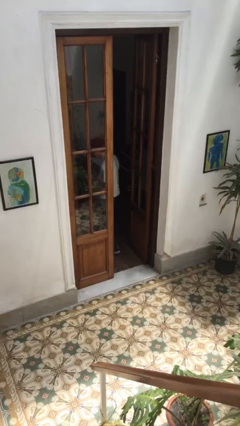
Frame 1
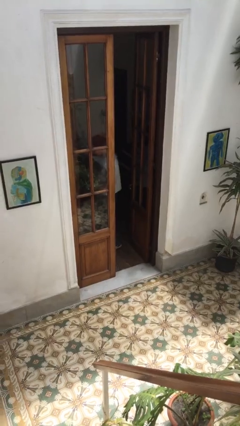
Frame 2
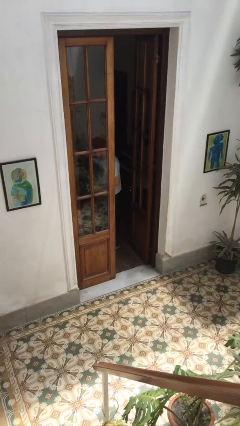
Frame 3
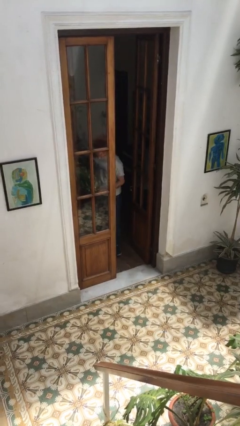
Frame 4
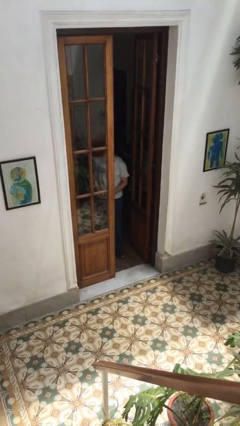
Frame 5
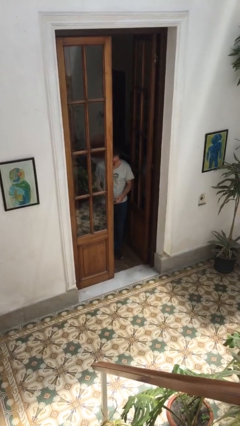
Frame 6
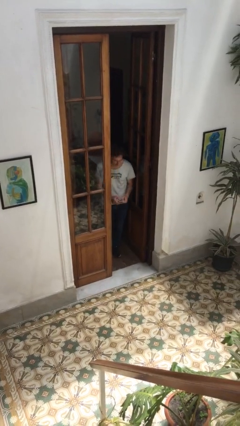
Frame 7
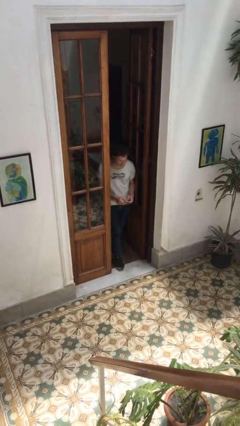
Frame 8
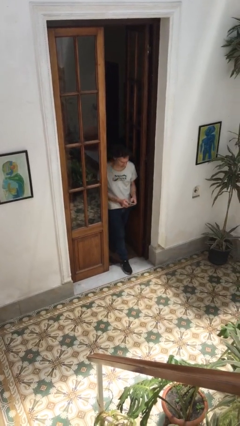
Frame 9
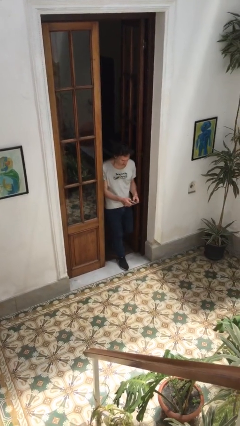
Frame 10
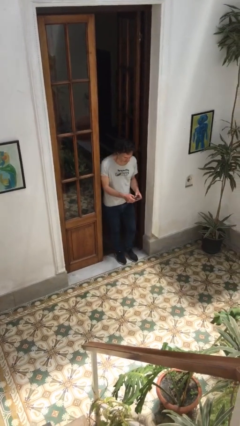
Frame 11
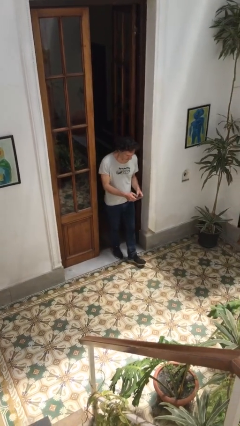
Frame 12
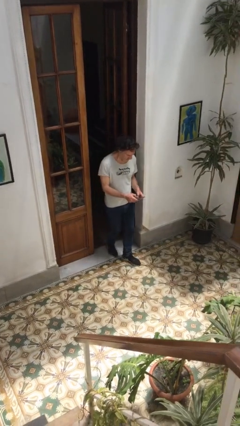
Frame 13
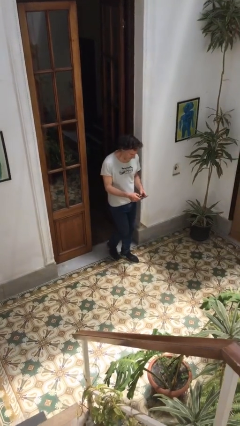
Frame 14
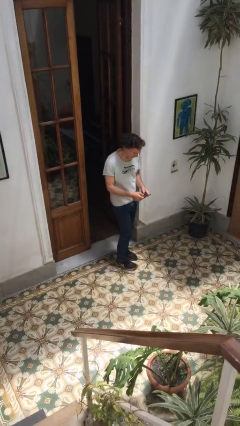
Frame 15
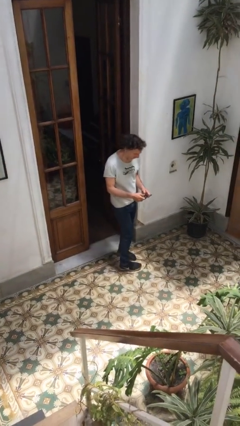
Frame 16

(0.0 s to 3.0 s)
person enters scene through structure

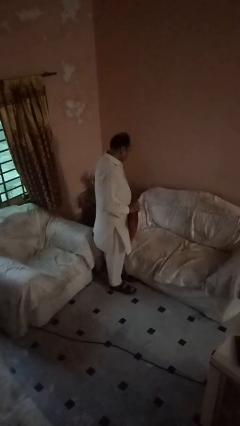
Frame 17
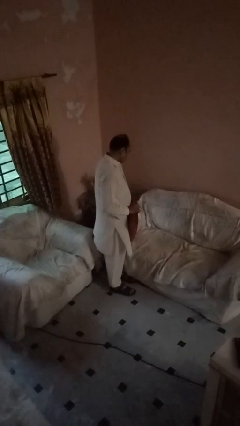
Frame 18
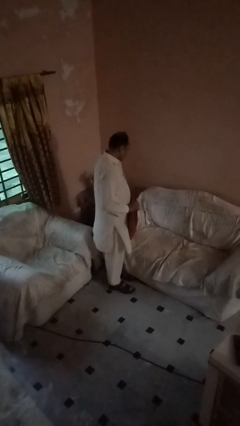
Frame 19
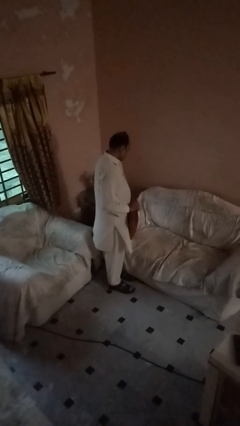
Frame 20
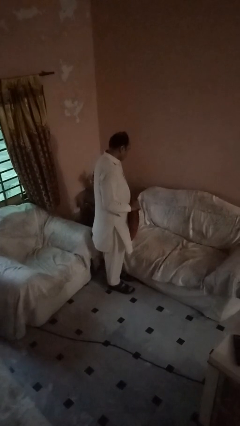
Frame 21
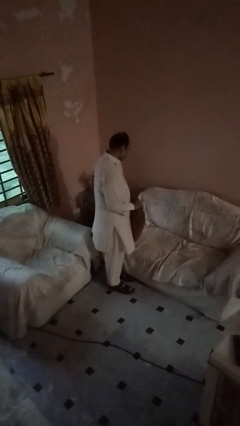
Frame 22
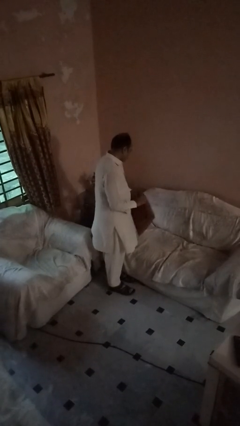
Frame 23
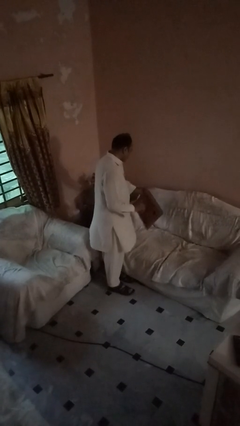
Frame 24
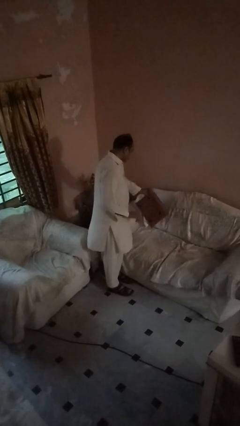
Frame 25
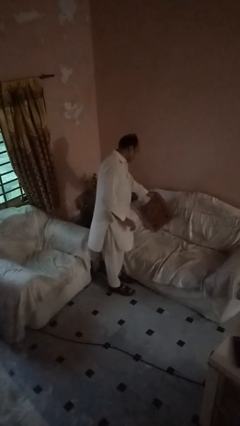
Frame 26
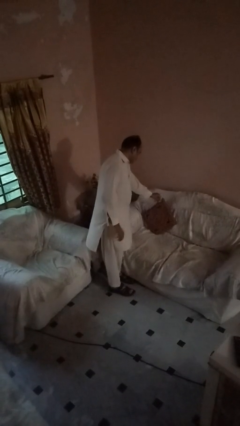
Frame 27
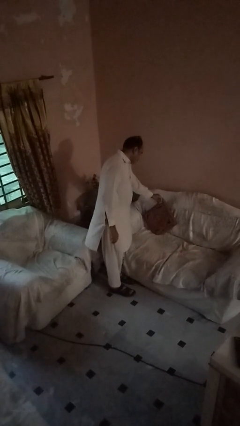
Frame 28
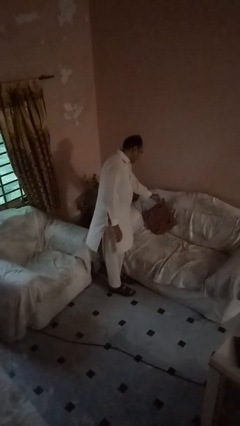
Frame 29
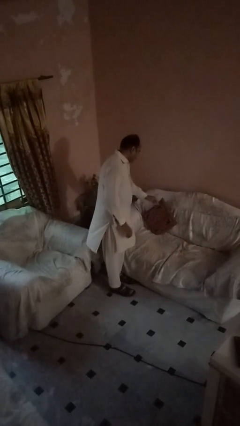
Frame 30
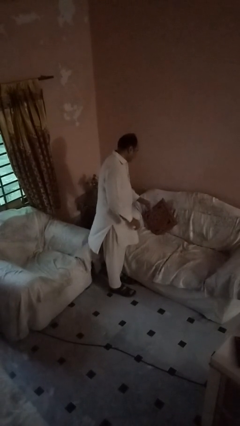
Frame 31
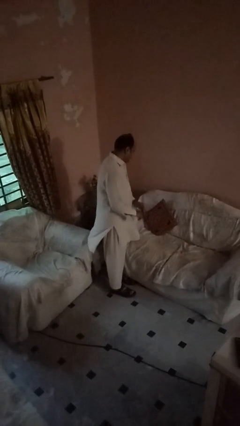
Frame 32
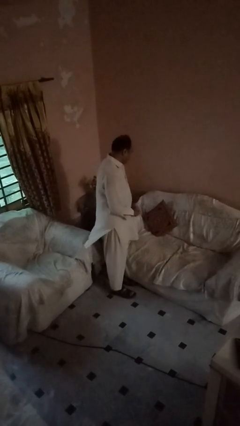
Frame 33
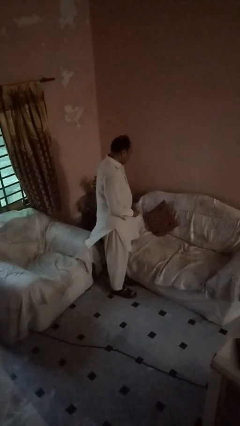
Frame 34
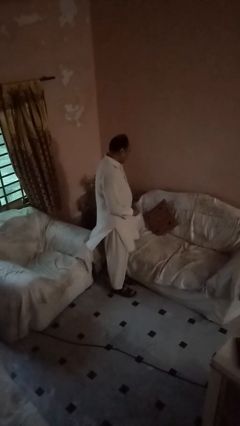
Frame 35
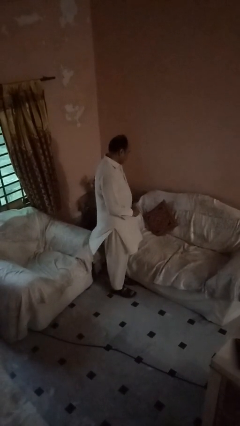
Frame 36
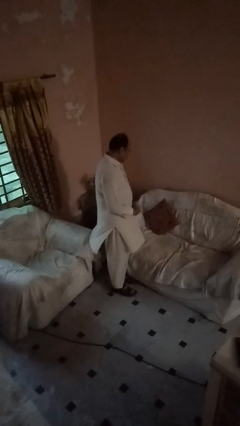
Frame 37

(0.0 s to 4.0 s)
person puts down object on couch

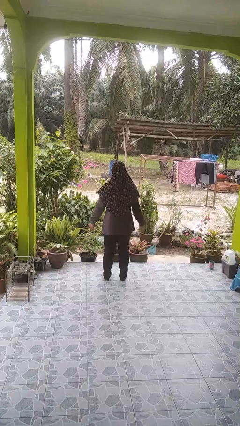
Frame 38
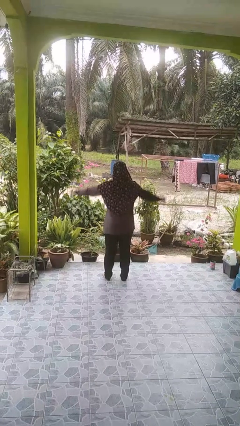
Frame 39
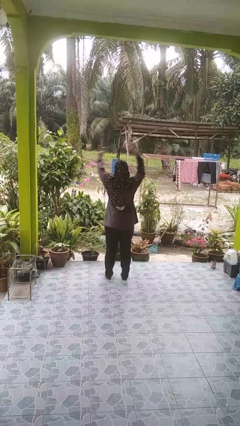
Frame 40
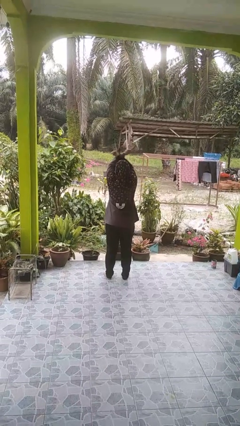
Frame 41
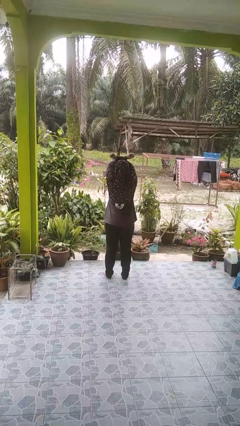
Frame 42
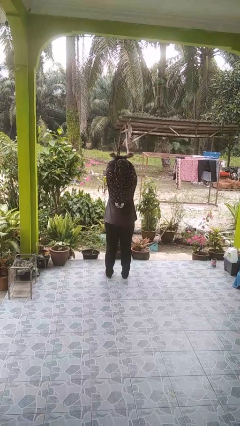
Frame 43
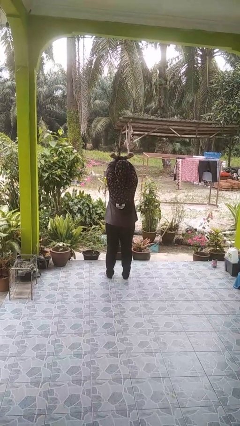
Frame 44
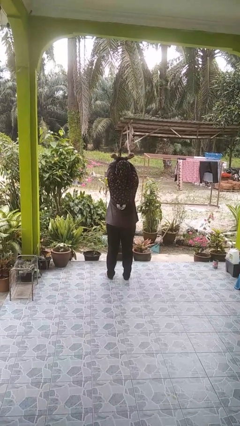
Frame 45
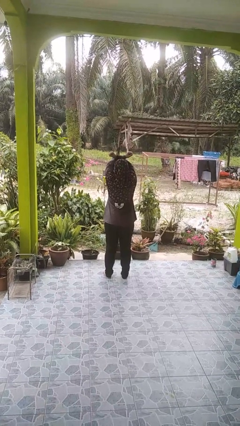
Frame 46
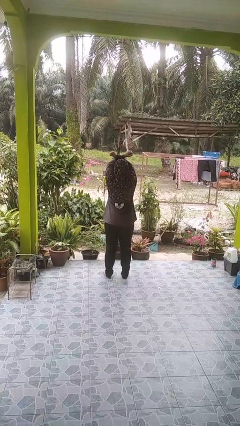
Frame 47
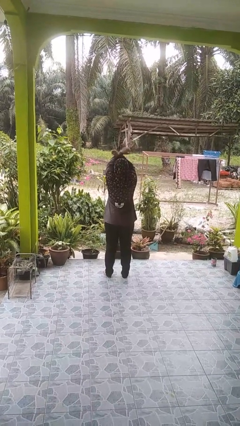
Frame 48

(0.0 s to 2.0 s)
person crosses arms

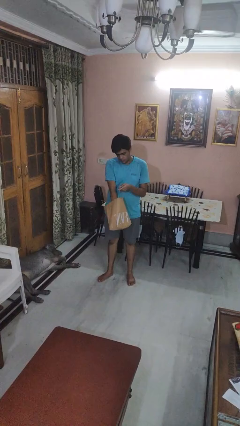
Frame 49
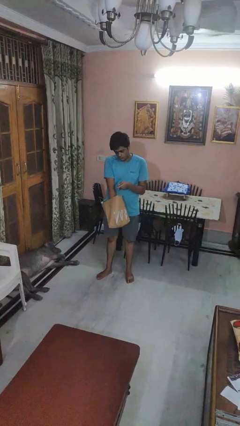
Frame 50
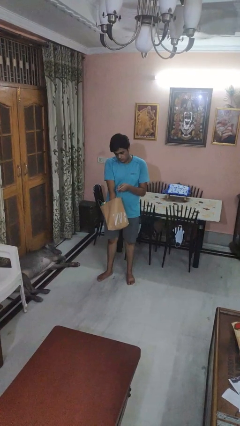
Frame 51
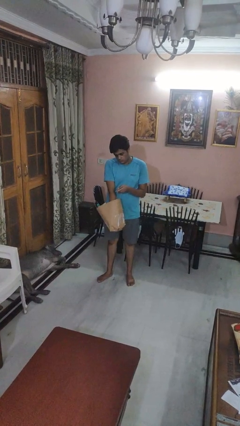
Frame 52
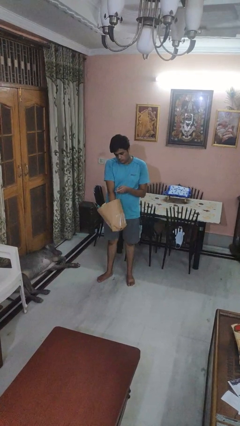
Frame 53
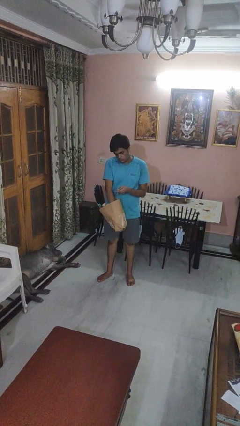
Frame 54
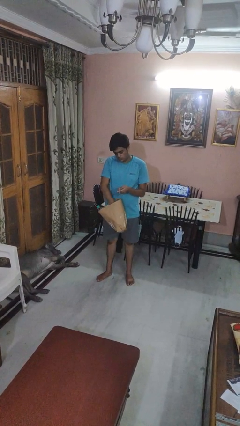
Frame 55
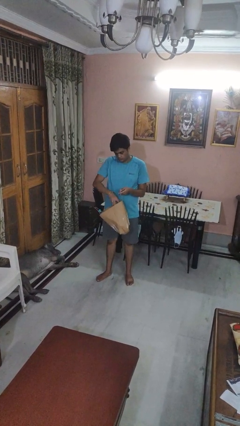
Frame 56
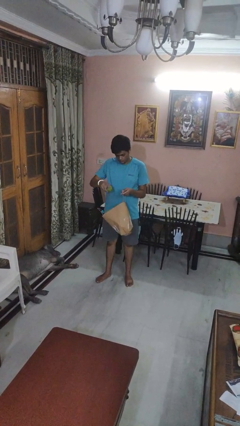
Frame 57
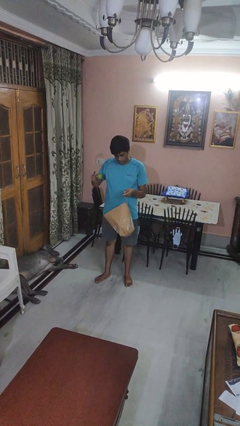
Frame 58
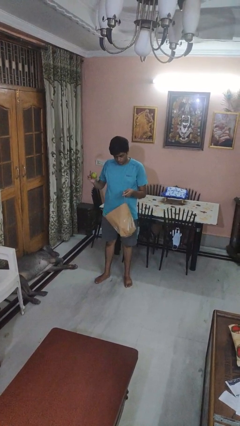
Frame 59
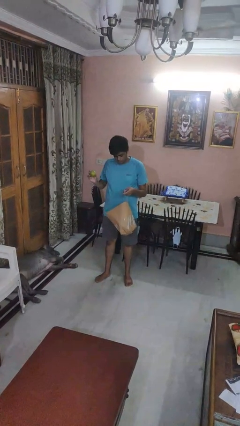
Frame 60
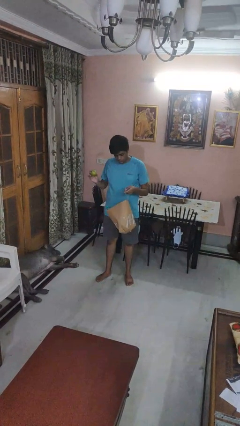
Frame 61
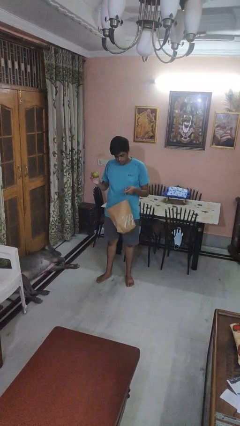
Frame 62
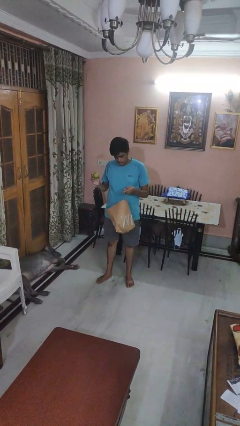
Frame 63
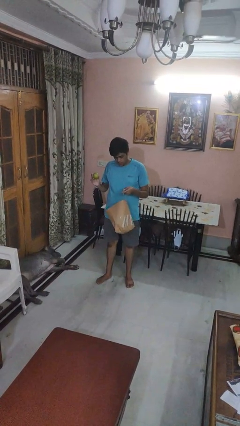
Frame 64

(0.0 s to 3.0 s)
person takes object from bag

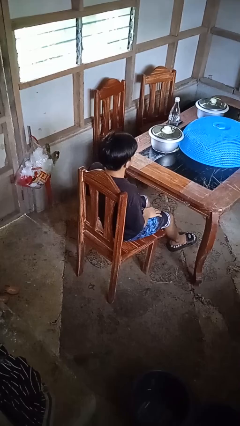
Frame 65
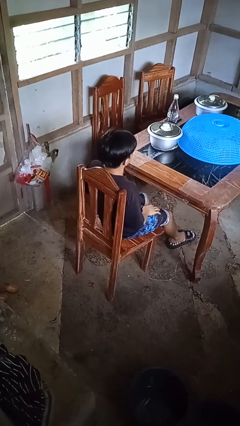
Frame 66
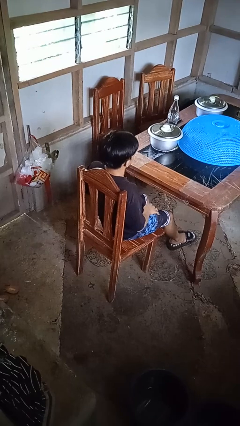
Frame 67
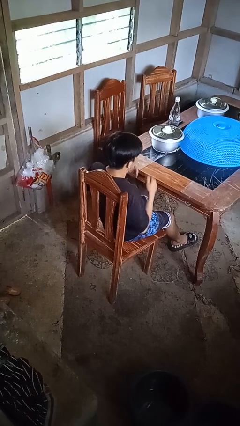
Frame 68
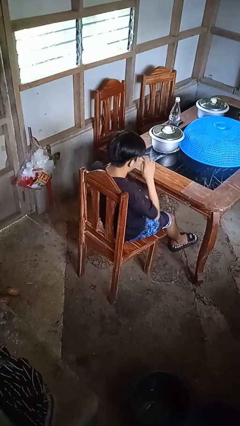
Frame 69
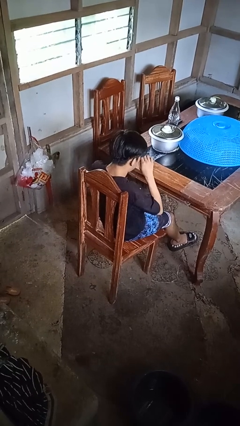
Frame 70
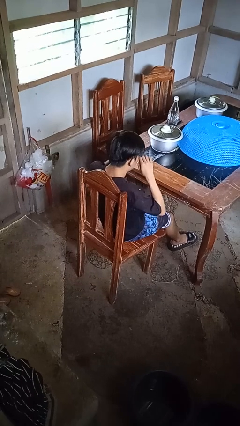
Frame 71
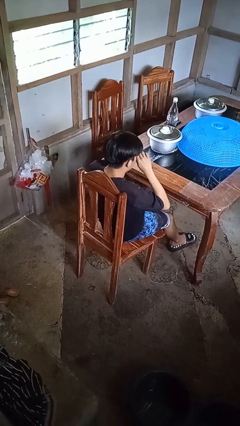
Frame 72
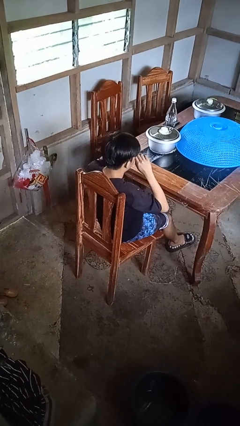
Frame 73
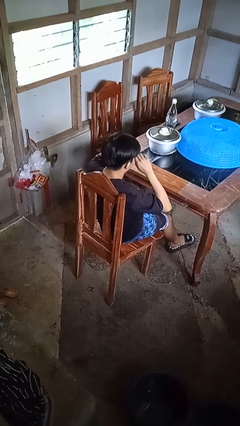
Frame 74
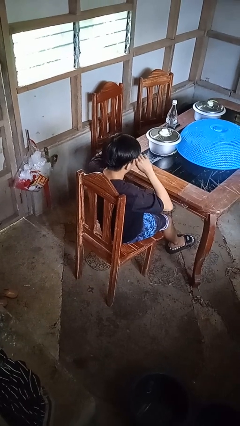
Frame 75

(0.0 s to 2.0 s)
person rubs eyes

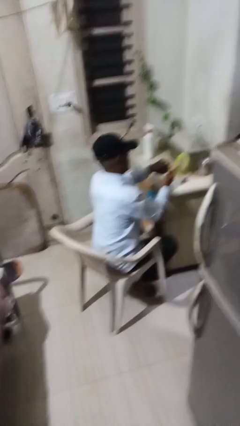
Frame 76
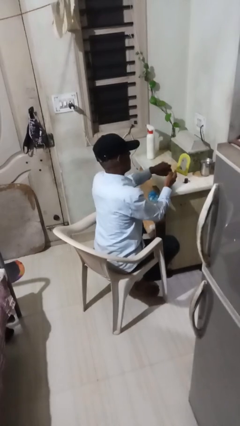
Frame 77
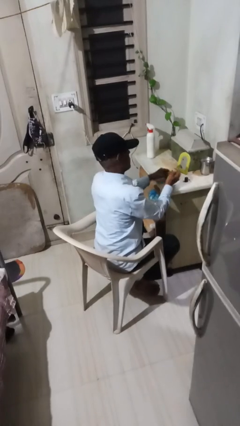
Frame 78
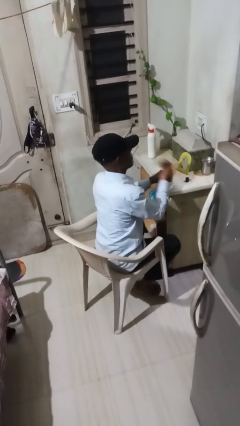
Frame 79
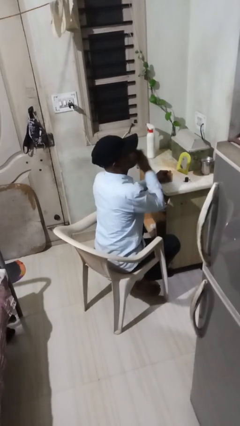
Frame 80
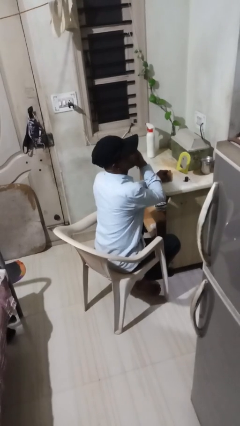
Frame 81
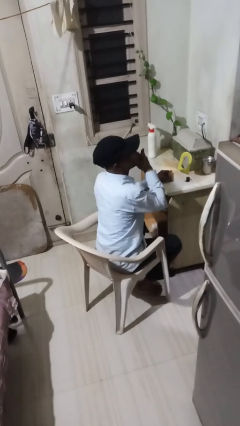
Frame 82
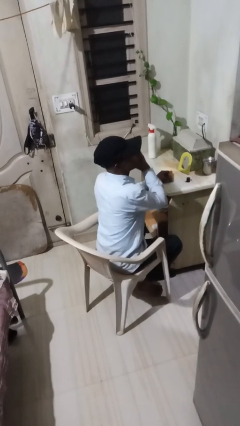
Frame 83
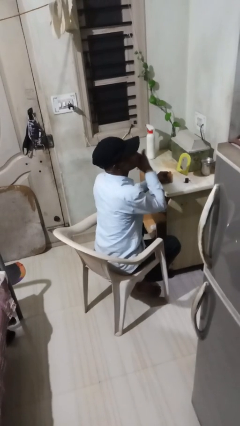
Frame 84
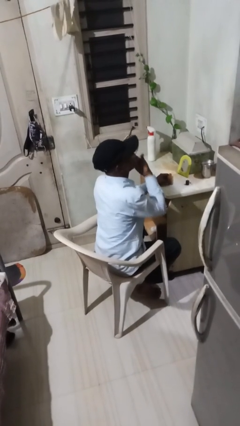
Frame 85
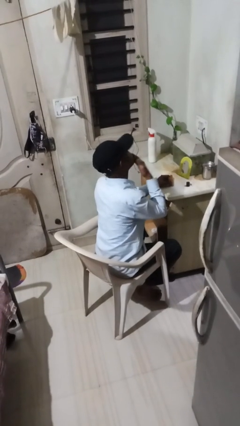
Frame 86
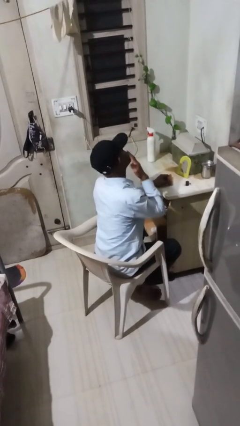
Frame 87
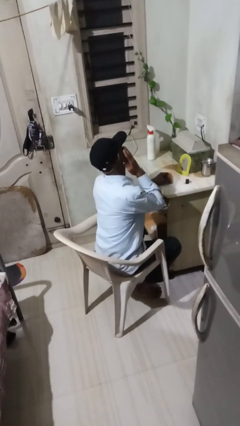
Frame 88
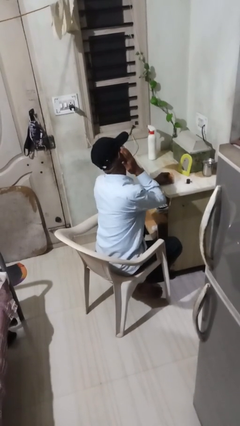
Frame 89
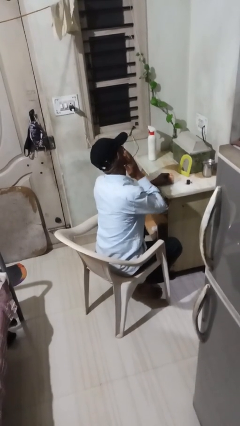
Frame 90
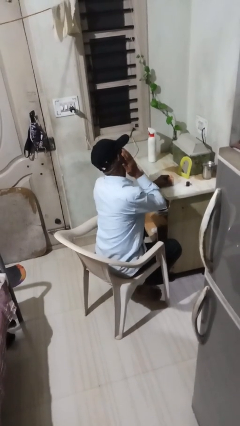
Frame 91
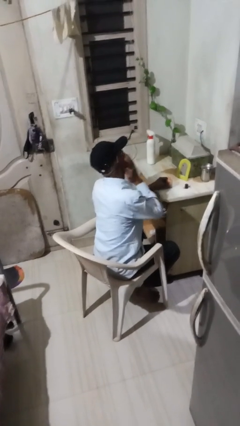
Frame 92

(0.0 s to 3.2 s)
person applies foundation makeup

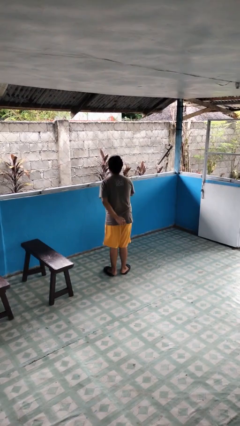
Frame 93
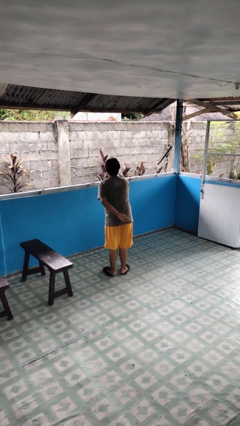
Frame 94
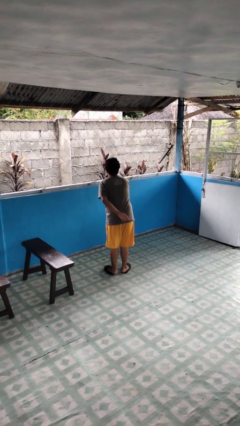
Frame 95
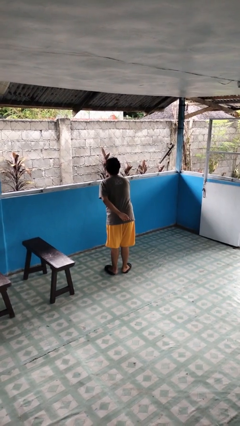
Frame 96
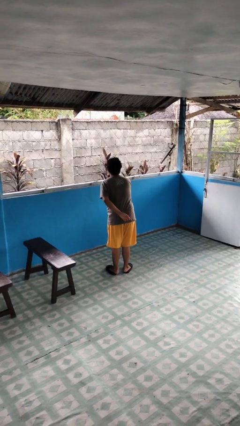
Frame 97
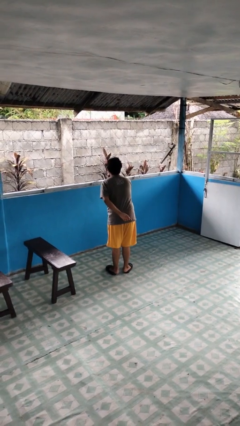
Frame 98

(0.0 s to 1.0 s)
person gestures be quiet
